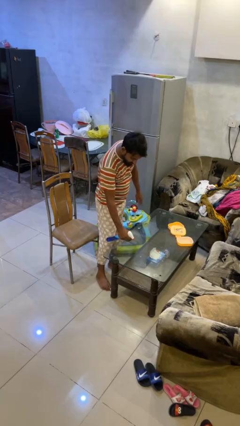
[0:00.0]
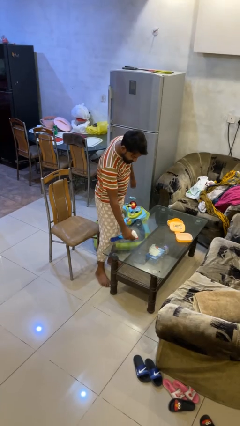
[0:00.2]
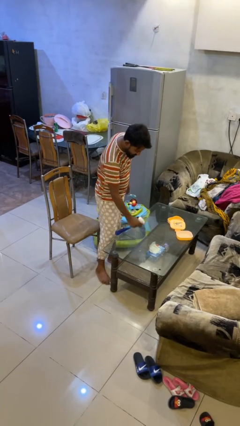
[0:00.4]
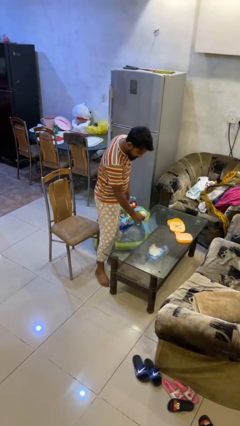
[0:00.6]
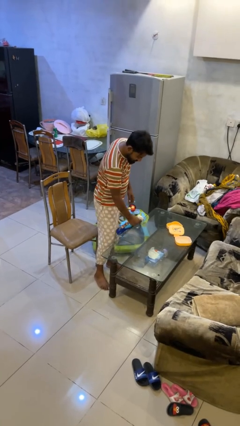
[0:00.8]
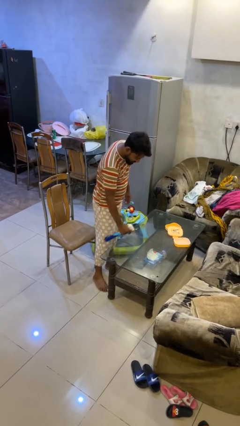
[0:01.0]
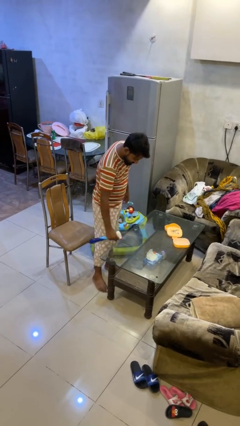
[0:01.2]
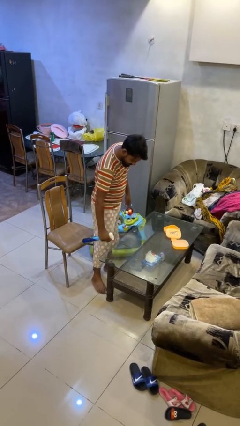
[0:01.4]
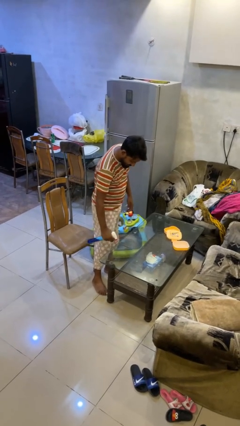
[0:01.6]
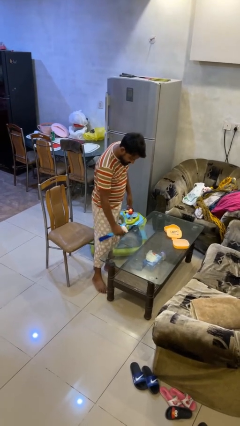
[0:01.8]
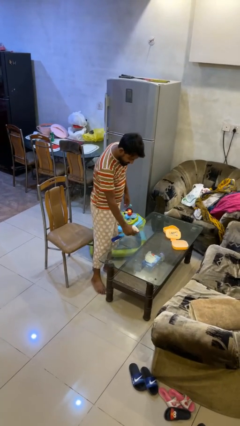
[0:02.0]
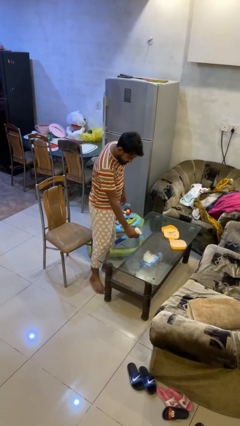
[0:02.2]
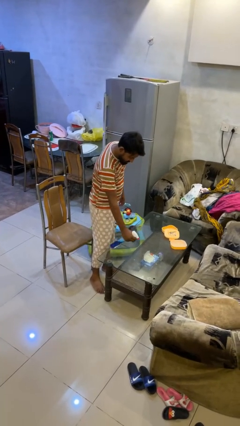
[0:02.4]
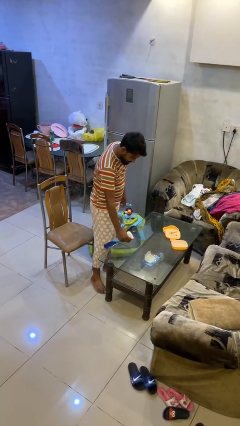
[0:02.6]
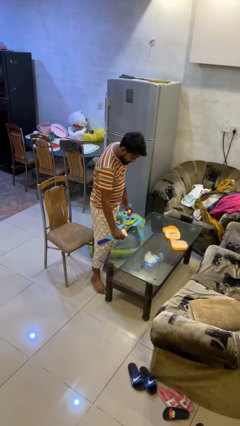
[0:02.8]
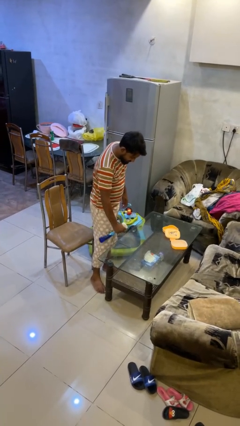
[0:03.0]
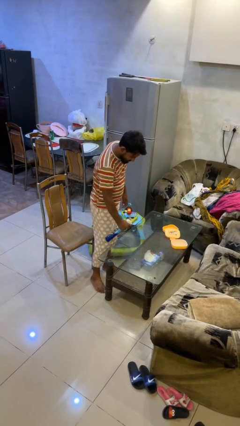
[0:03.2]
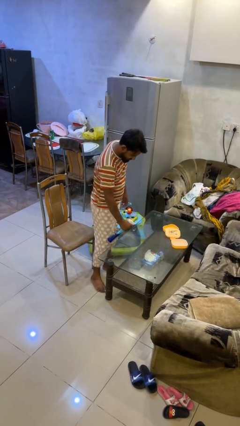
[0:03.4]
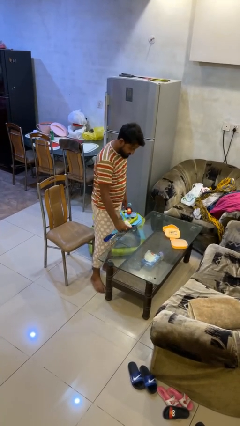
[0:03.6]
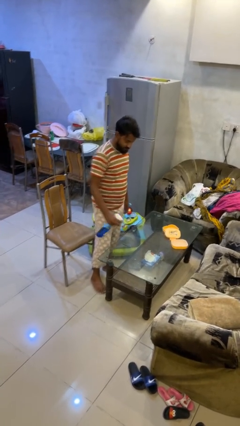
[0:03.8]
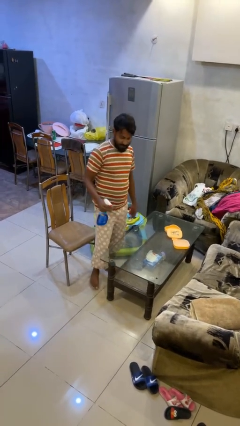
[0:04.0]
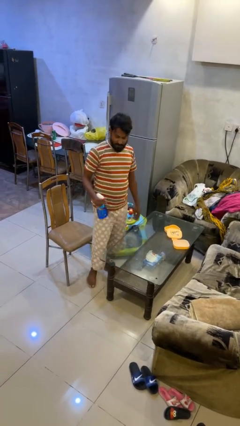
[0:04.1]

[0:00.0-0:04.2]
person sprays from bottle

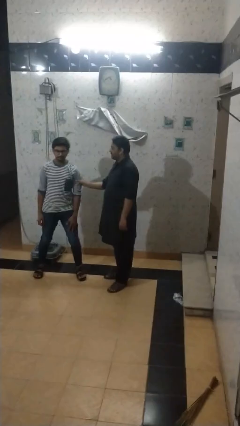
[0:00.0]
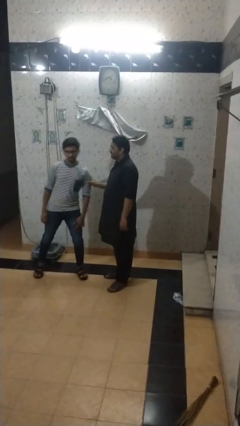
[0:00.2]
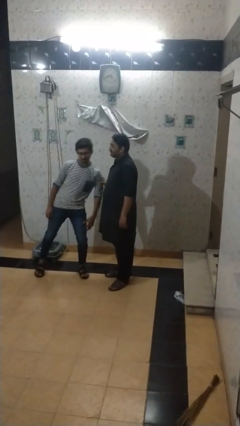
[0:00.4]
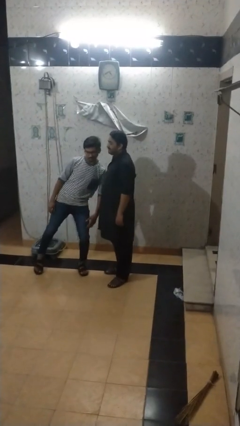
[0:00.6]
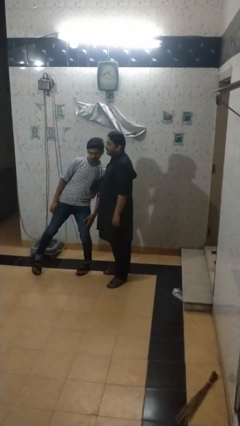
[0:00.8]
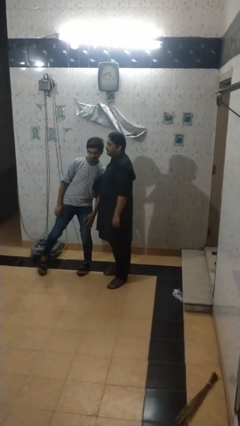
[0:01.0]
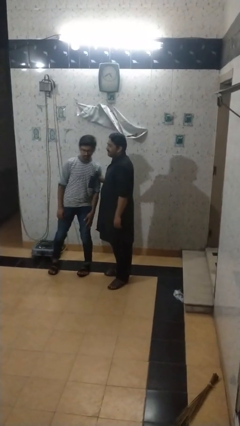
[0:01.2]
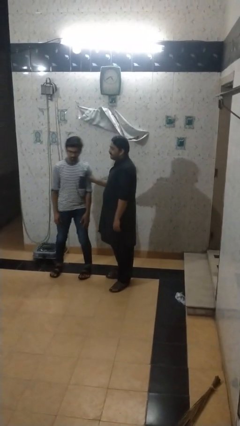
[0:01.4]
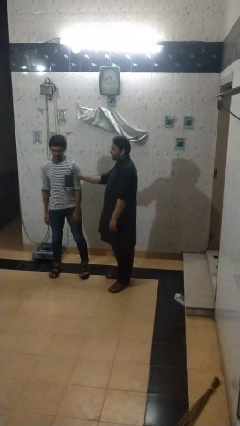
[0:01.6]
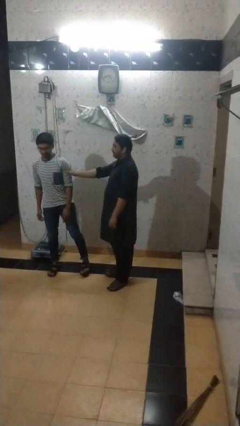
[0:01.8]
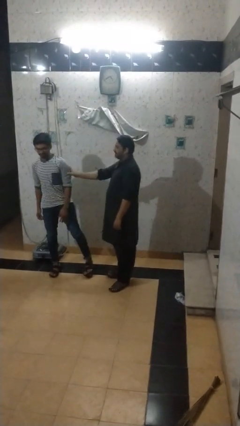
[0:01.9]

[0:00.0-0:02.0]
person grabs person by bicep

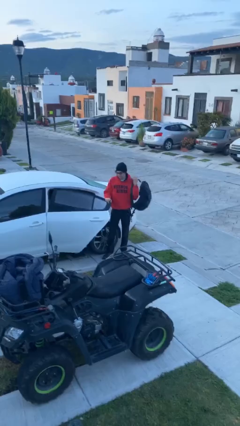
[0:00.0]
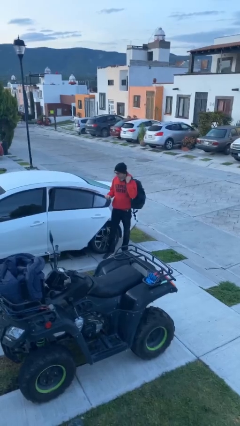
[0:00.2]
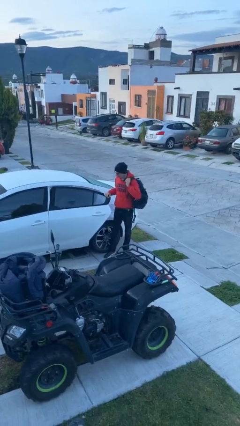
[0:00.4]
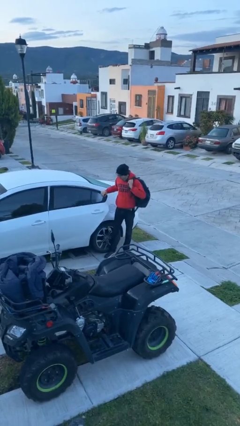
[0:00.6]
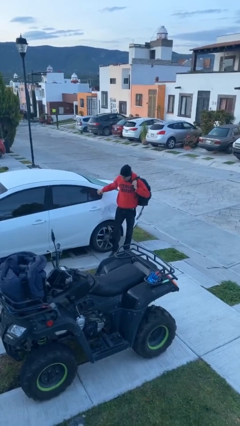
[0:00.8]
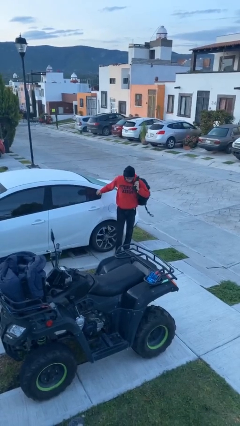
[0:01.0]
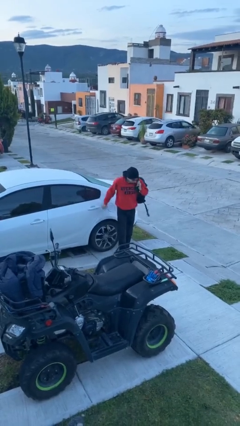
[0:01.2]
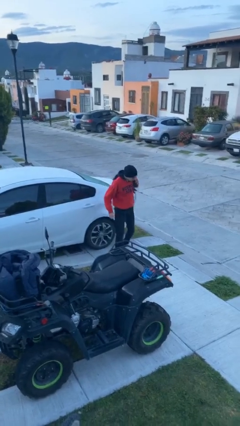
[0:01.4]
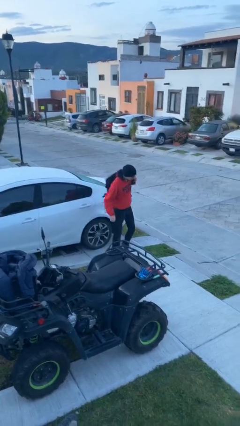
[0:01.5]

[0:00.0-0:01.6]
person closes car door

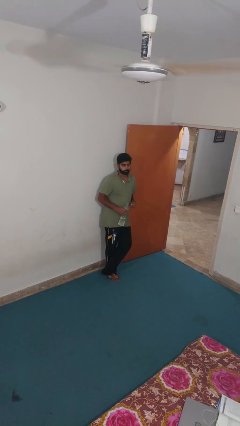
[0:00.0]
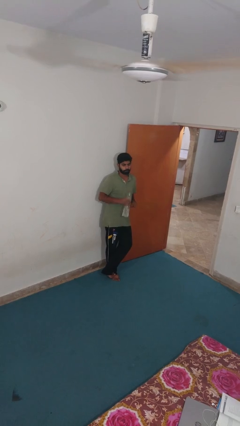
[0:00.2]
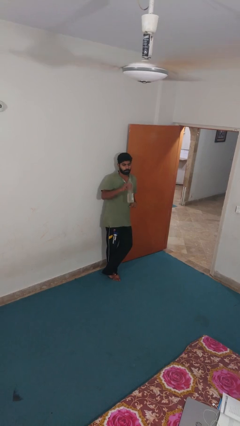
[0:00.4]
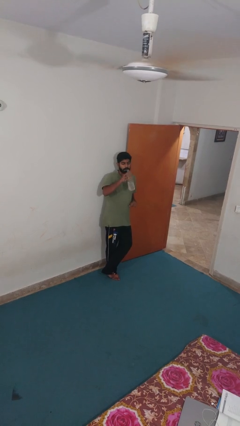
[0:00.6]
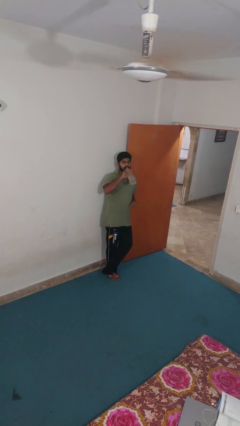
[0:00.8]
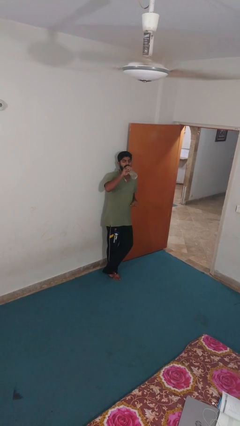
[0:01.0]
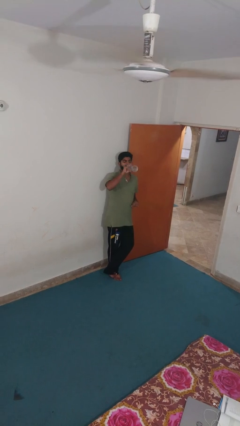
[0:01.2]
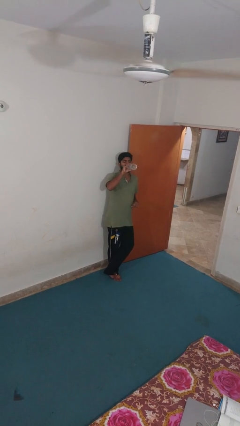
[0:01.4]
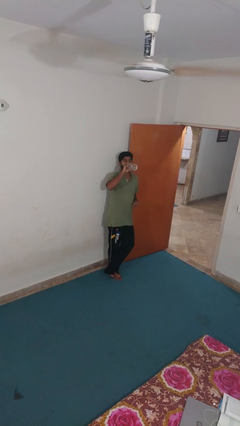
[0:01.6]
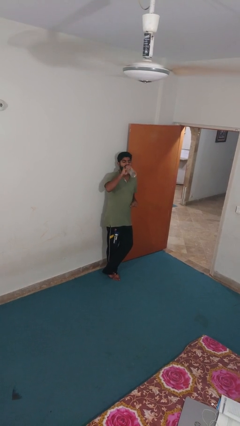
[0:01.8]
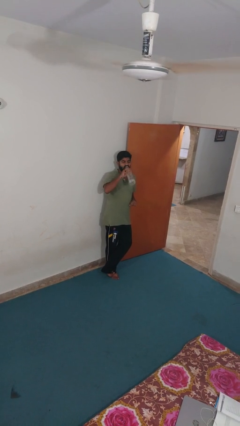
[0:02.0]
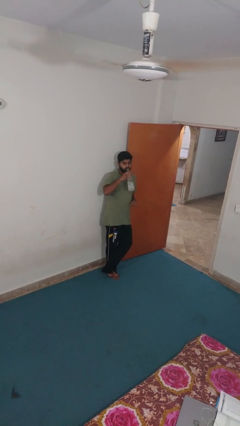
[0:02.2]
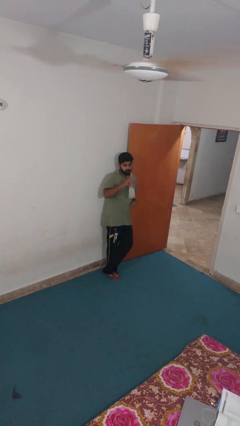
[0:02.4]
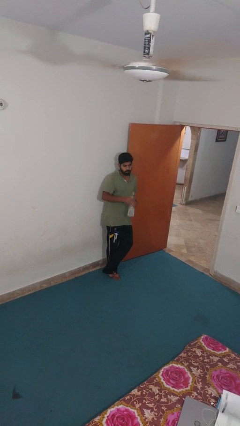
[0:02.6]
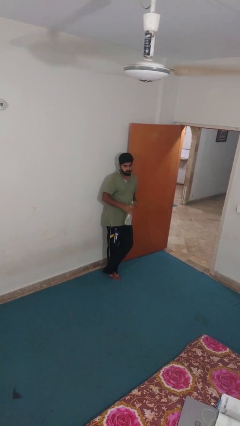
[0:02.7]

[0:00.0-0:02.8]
person drinks from bottle

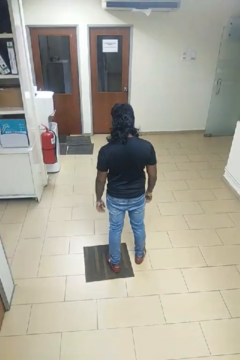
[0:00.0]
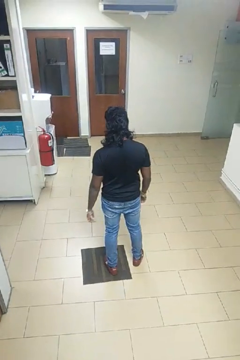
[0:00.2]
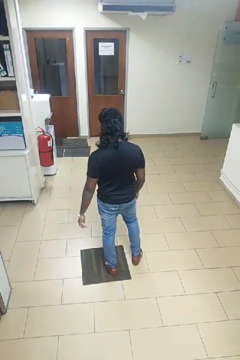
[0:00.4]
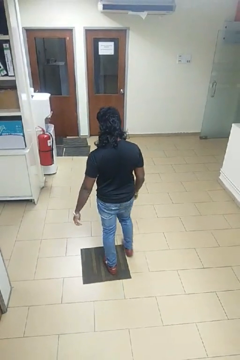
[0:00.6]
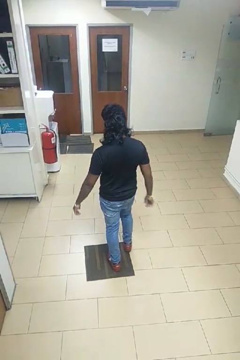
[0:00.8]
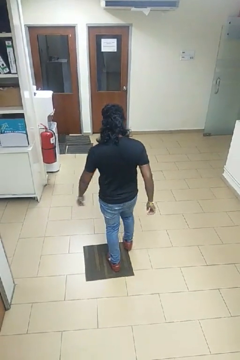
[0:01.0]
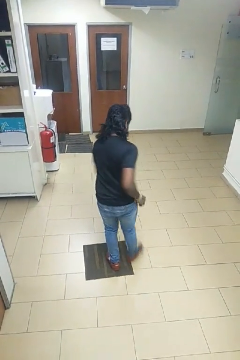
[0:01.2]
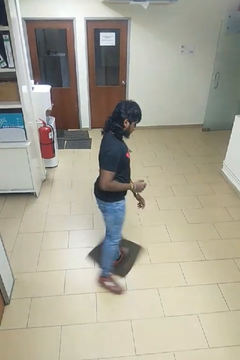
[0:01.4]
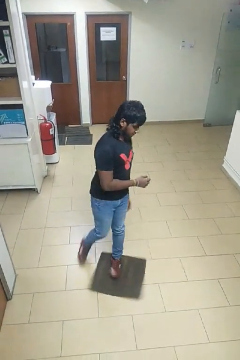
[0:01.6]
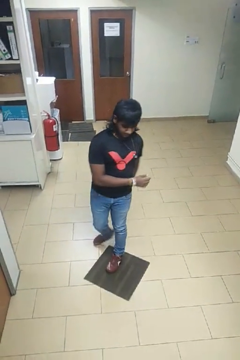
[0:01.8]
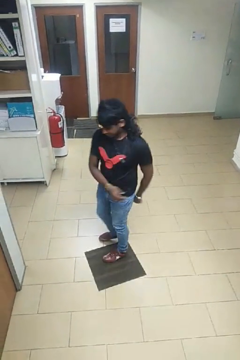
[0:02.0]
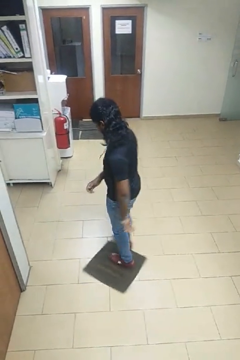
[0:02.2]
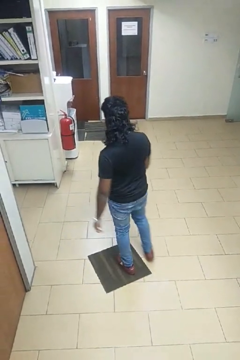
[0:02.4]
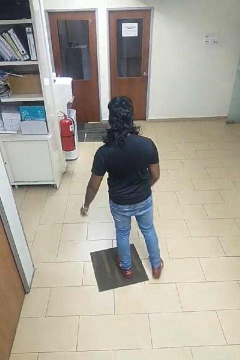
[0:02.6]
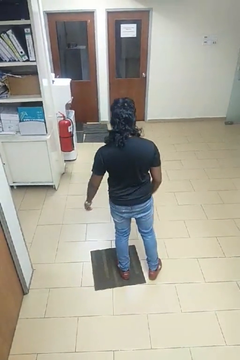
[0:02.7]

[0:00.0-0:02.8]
person twirls

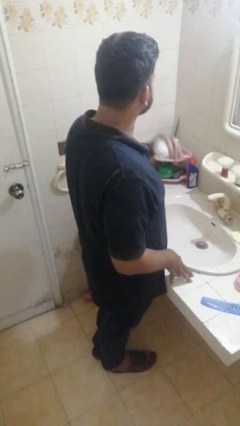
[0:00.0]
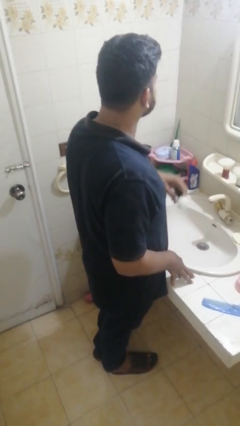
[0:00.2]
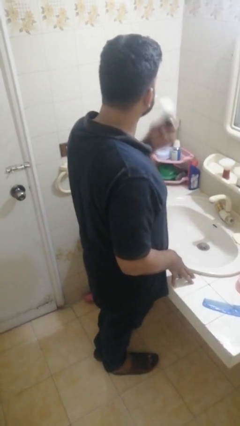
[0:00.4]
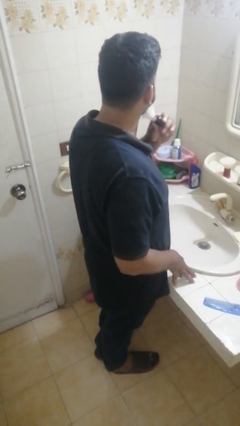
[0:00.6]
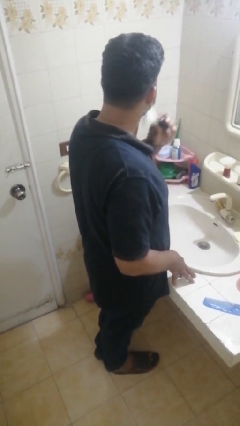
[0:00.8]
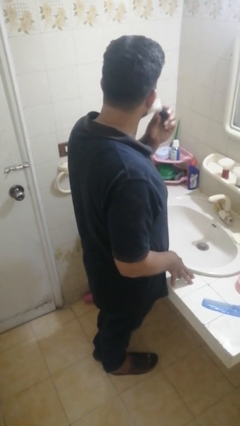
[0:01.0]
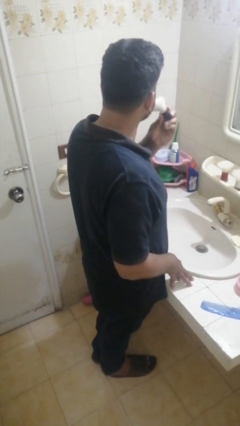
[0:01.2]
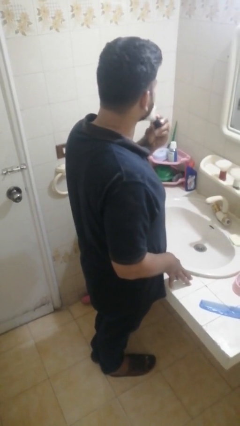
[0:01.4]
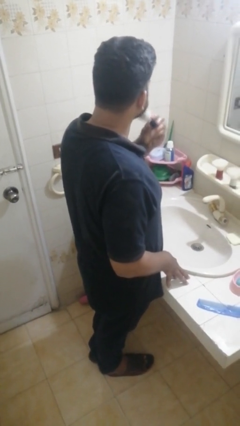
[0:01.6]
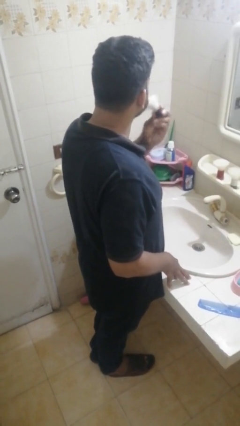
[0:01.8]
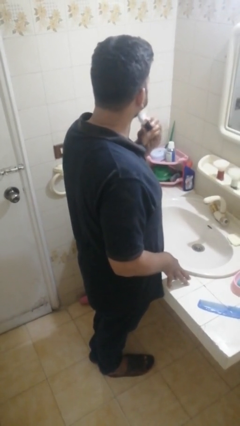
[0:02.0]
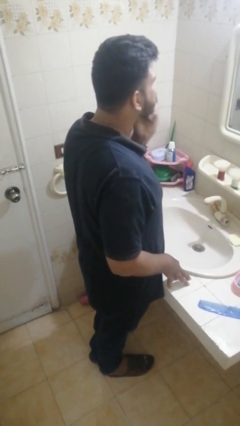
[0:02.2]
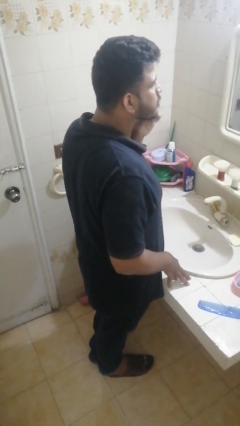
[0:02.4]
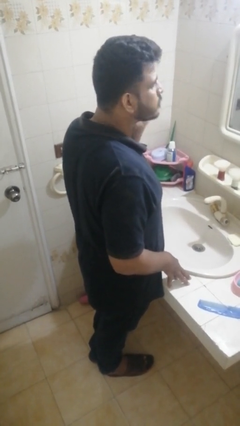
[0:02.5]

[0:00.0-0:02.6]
person applies shaving cream

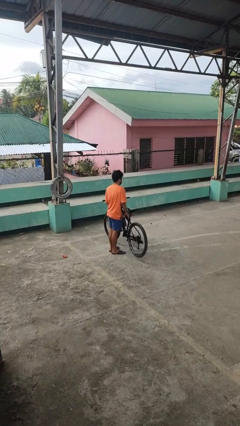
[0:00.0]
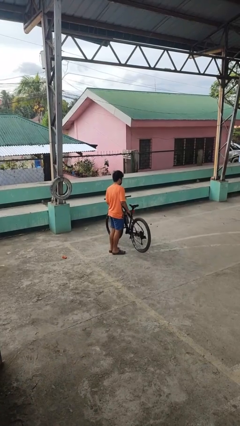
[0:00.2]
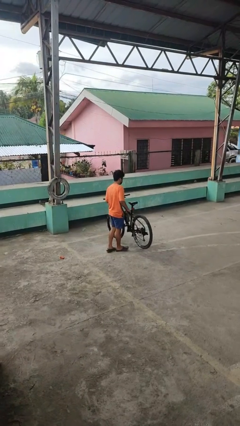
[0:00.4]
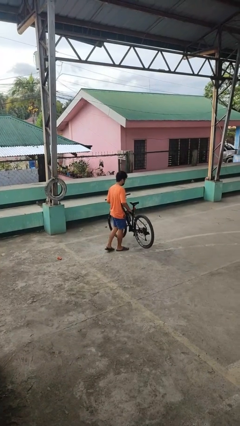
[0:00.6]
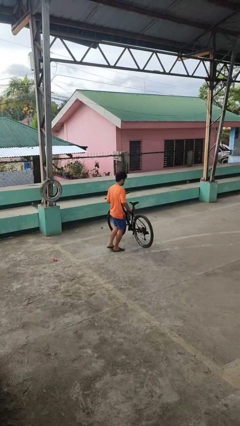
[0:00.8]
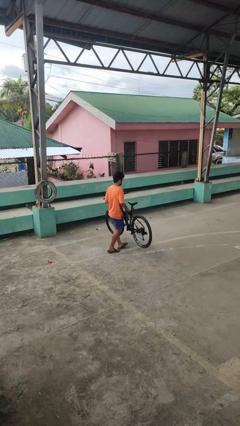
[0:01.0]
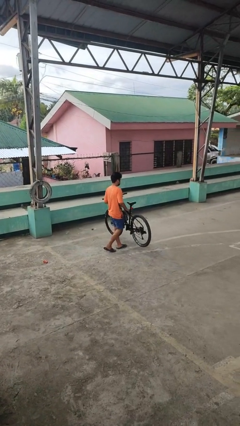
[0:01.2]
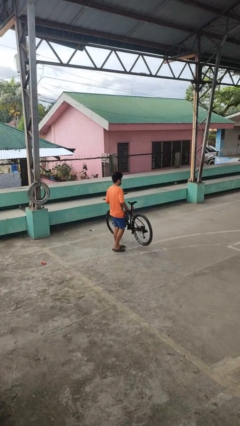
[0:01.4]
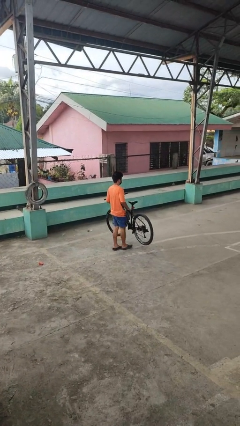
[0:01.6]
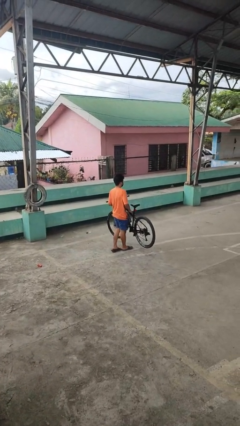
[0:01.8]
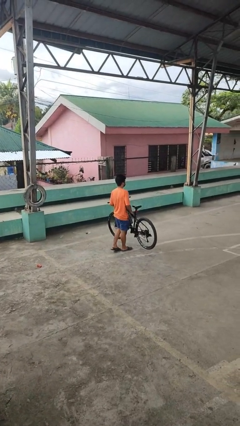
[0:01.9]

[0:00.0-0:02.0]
person carries bicycle
